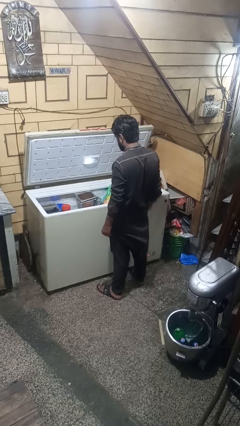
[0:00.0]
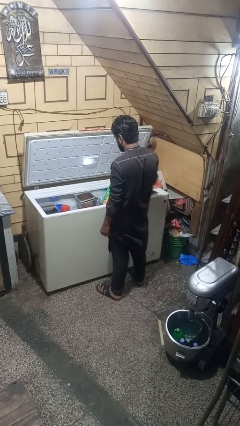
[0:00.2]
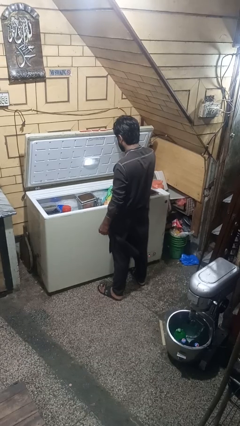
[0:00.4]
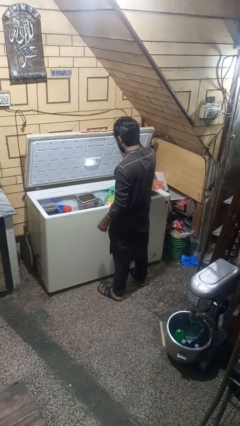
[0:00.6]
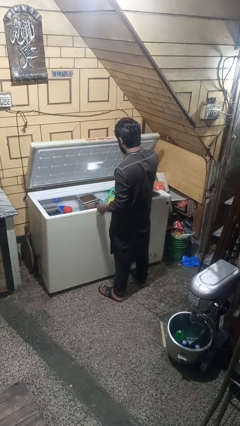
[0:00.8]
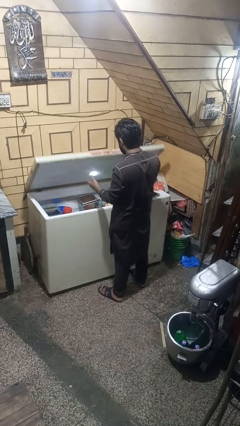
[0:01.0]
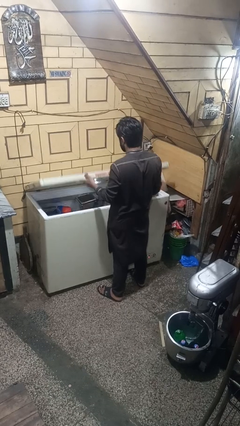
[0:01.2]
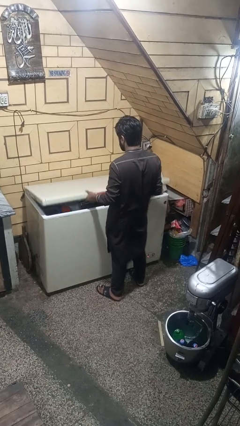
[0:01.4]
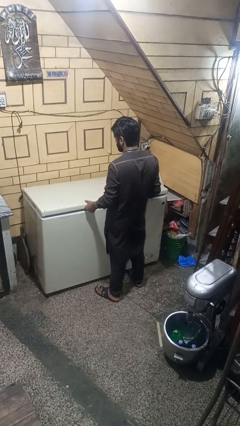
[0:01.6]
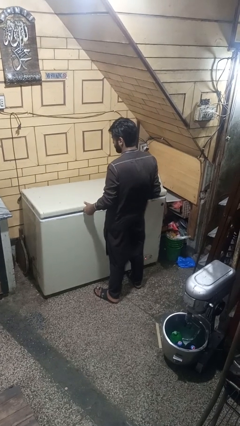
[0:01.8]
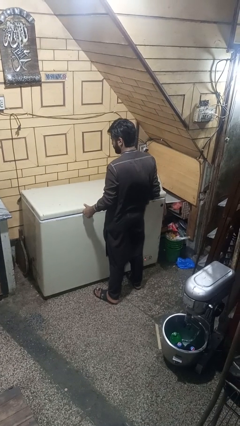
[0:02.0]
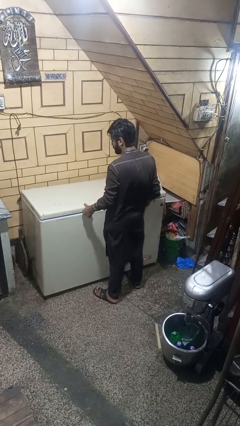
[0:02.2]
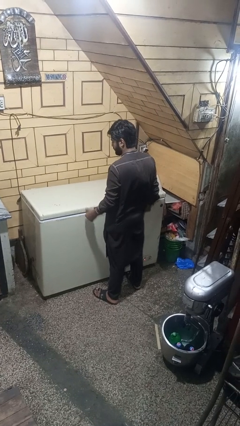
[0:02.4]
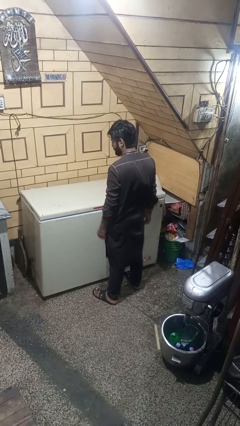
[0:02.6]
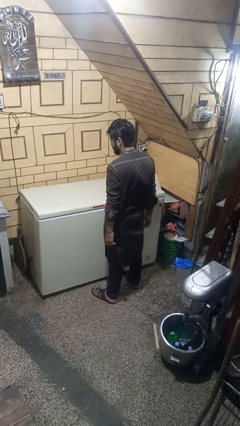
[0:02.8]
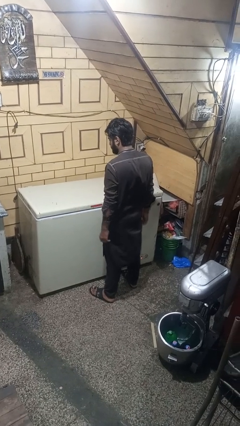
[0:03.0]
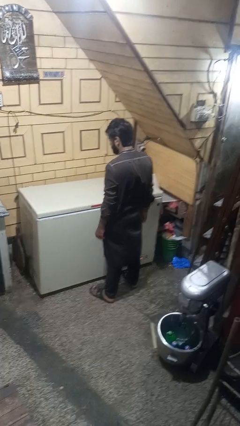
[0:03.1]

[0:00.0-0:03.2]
person closes refrigerator

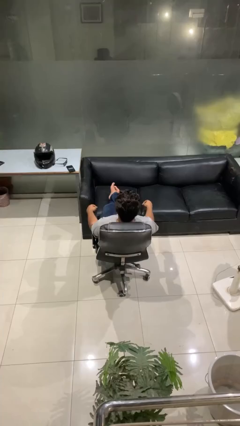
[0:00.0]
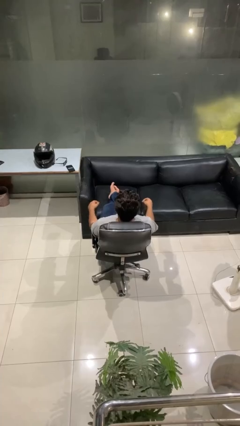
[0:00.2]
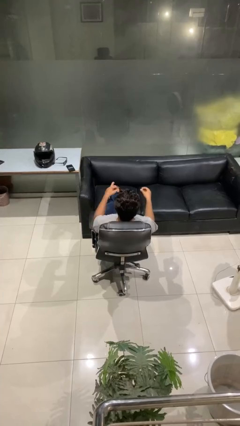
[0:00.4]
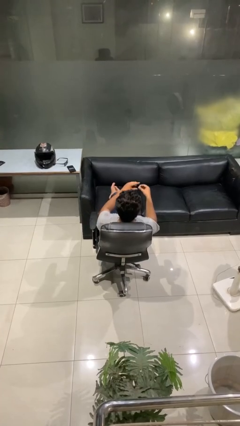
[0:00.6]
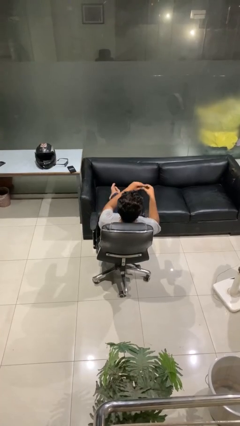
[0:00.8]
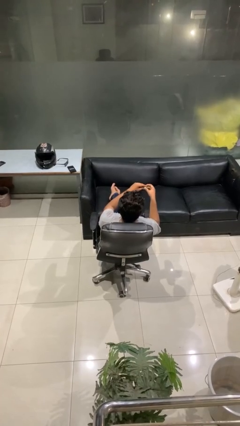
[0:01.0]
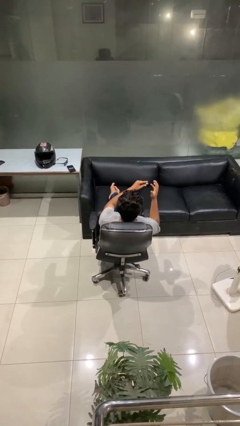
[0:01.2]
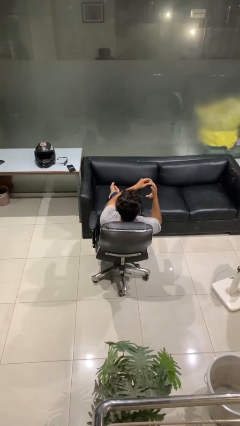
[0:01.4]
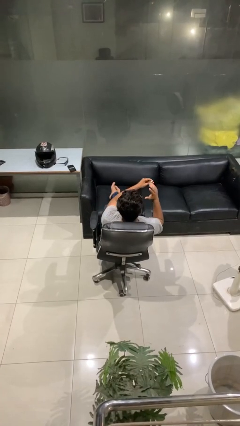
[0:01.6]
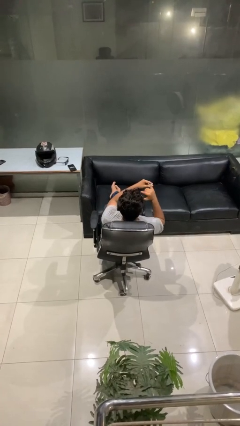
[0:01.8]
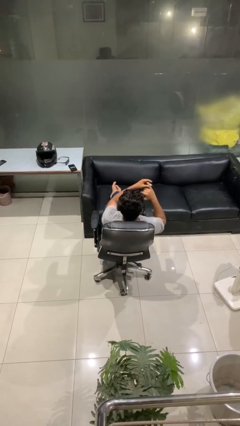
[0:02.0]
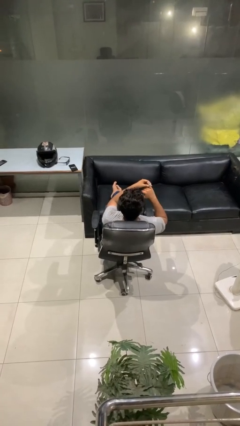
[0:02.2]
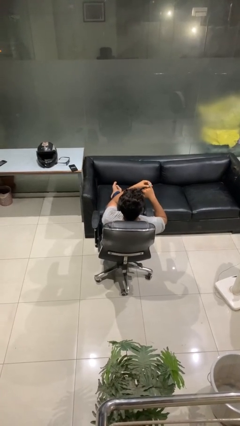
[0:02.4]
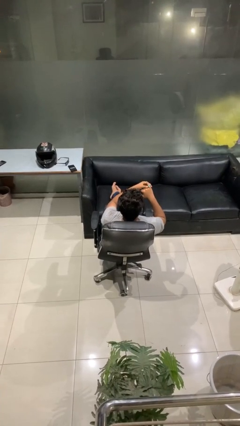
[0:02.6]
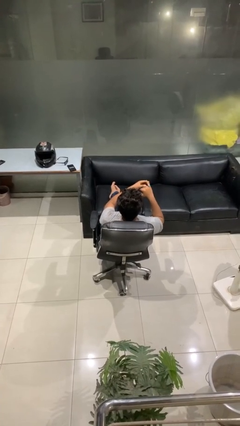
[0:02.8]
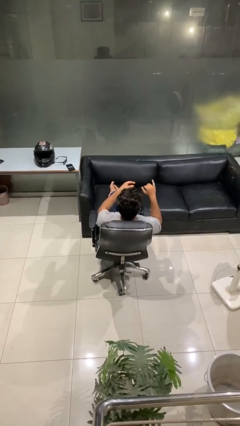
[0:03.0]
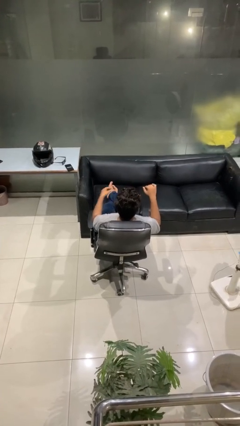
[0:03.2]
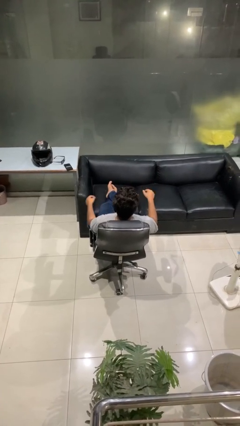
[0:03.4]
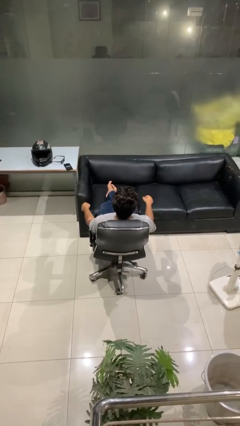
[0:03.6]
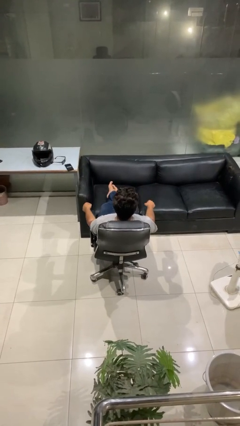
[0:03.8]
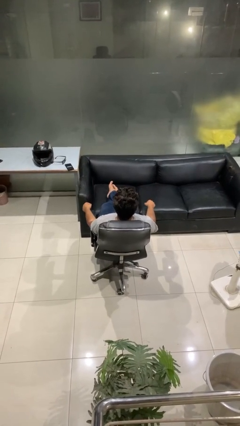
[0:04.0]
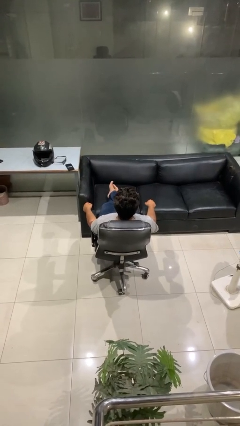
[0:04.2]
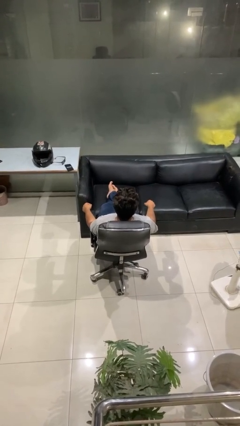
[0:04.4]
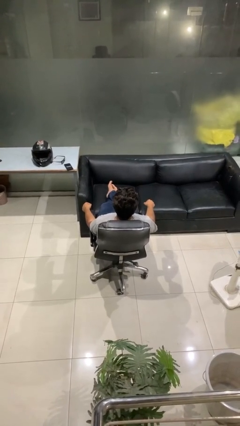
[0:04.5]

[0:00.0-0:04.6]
person puts on ring

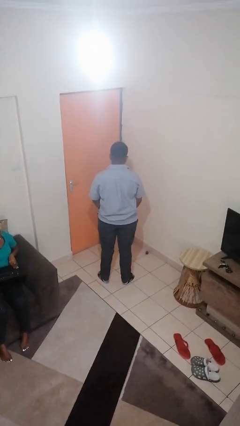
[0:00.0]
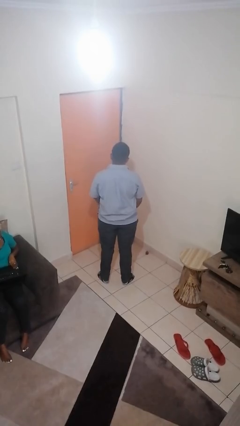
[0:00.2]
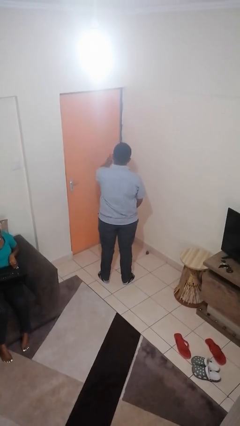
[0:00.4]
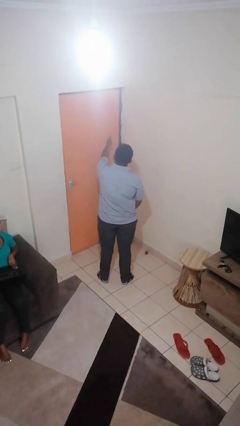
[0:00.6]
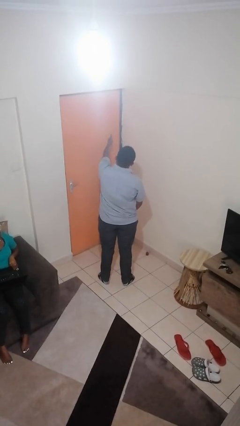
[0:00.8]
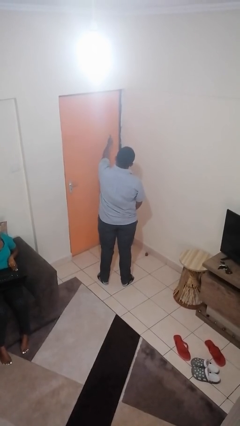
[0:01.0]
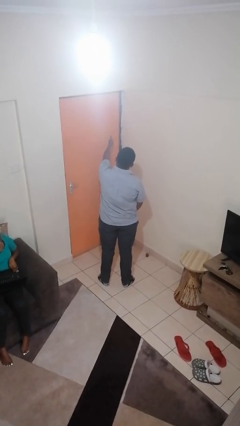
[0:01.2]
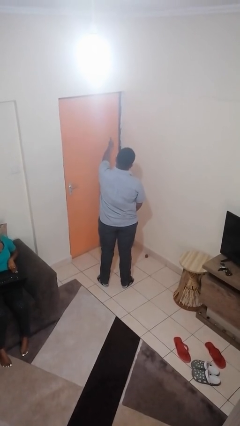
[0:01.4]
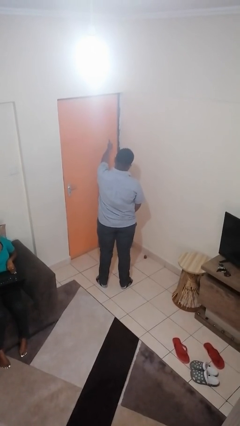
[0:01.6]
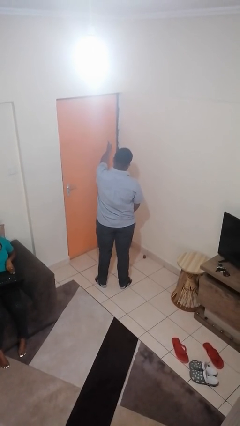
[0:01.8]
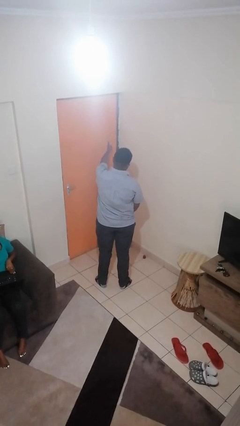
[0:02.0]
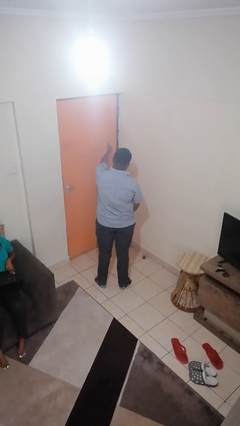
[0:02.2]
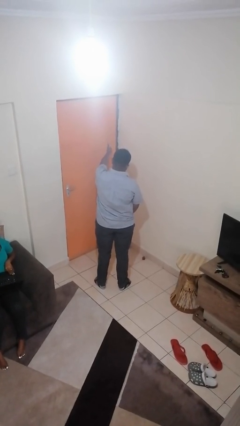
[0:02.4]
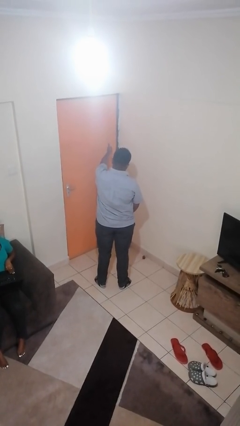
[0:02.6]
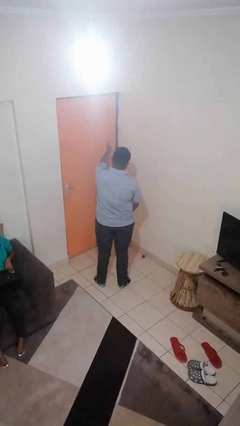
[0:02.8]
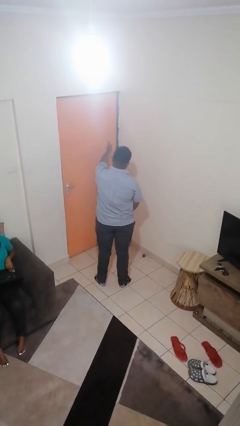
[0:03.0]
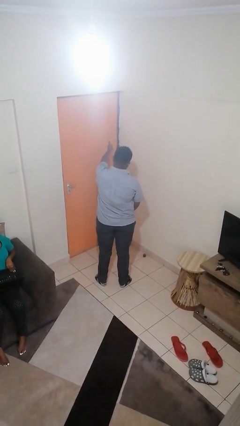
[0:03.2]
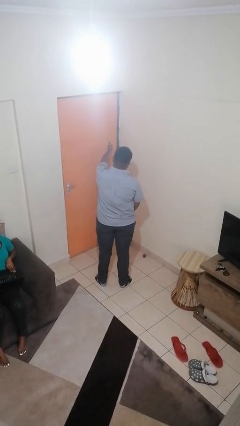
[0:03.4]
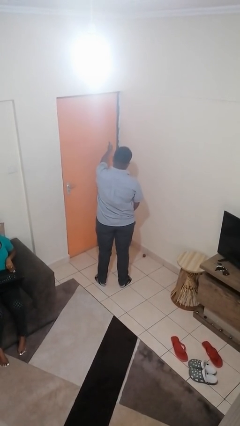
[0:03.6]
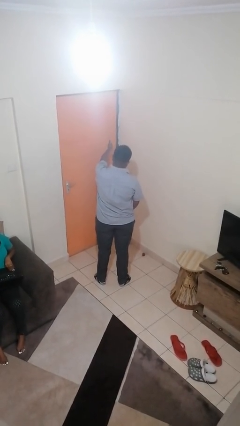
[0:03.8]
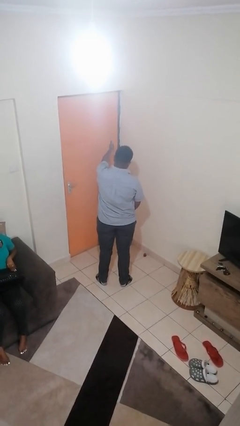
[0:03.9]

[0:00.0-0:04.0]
person gestures thumbs up

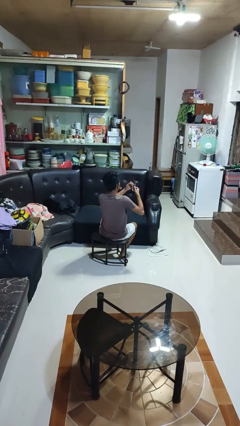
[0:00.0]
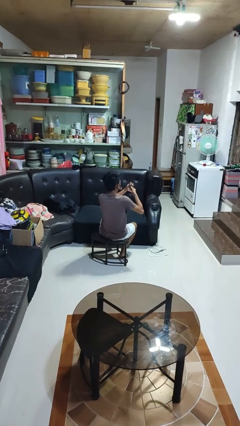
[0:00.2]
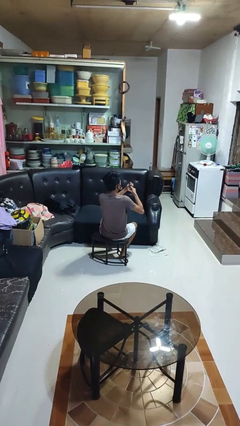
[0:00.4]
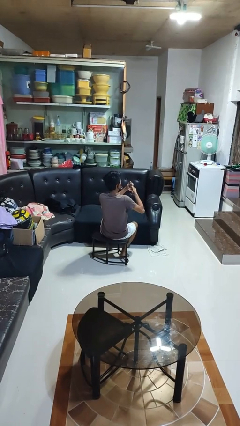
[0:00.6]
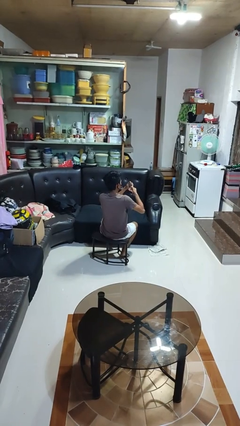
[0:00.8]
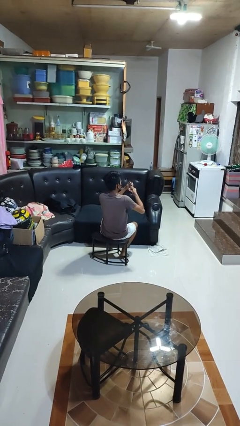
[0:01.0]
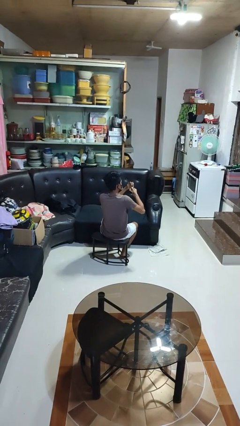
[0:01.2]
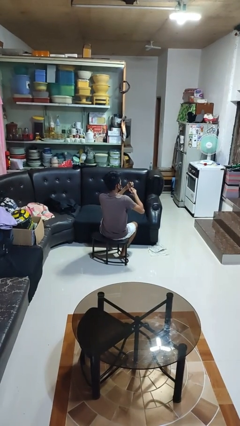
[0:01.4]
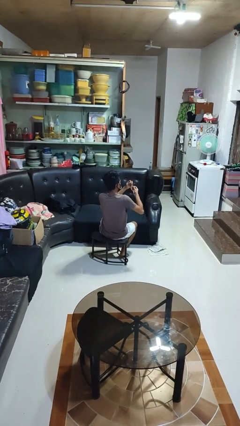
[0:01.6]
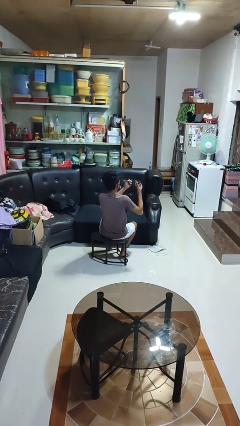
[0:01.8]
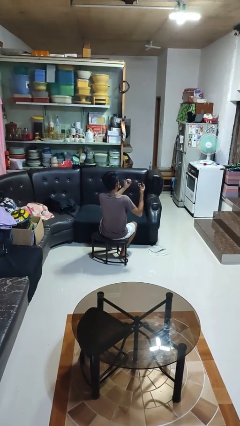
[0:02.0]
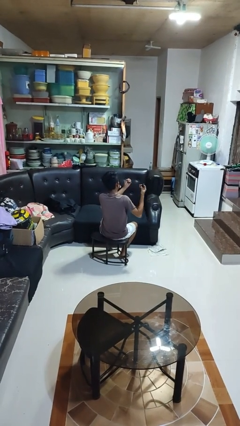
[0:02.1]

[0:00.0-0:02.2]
person clips fingernails

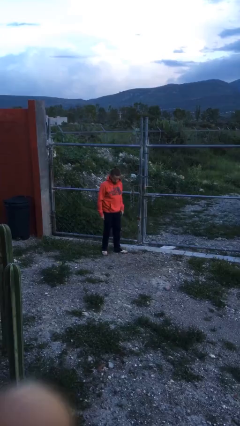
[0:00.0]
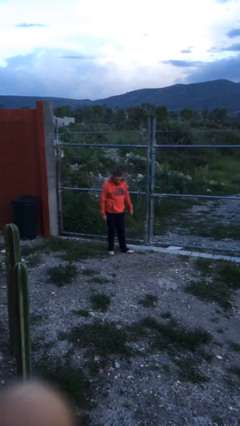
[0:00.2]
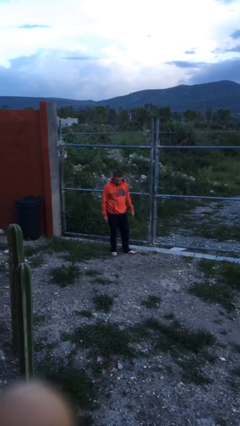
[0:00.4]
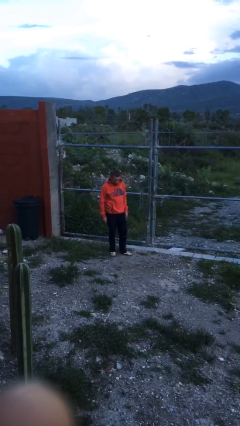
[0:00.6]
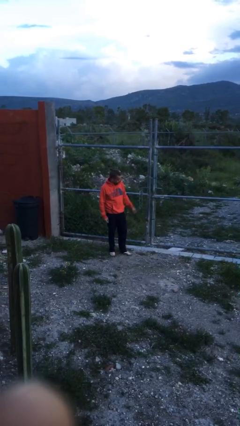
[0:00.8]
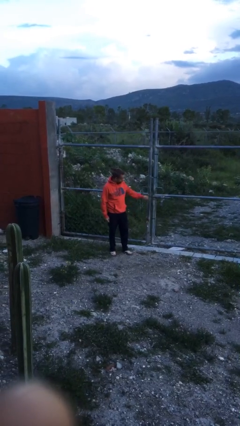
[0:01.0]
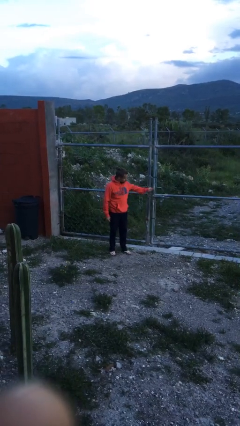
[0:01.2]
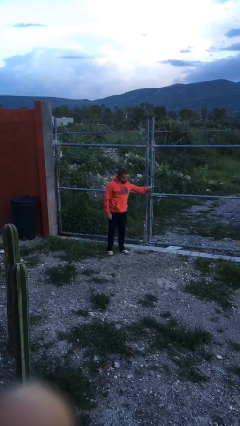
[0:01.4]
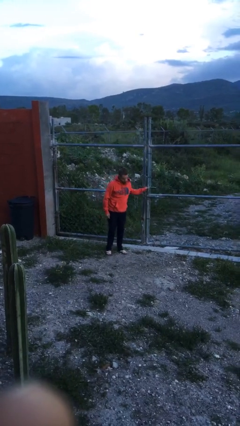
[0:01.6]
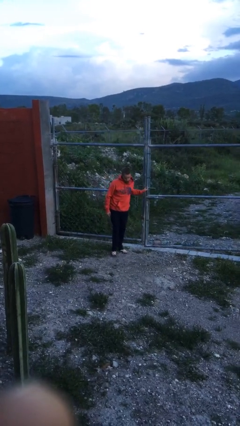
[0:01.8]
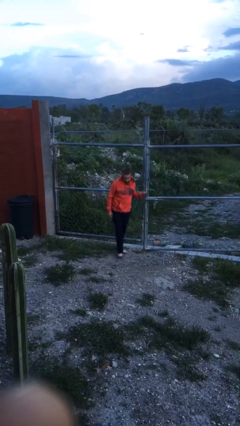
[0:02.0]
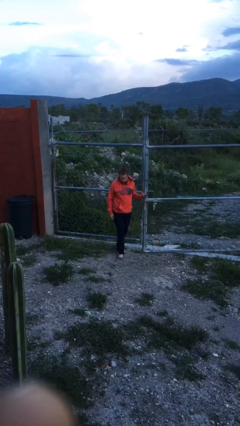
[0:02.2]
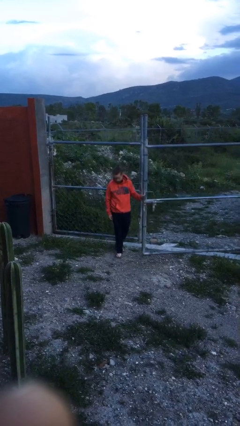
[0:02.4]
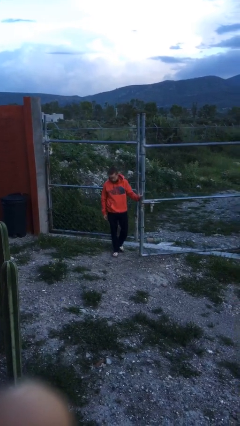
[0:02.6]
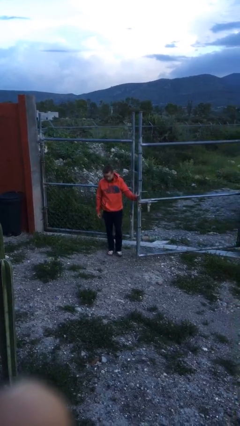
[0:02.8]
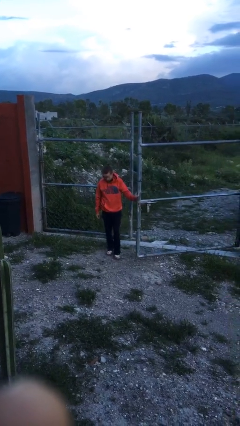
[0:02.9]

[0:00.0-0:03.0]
person opens gate

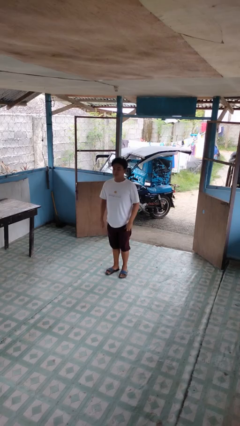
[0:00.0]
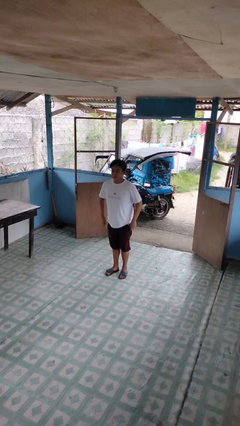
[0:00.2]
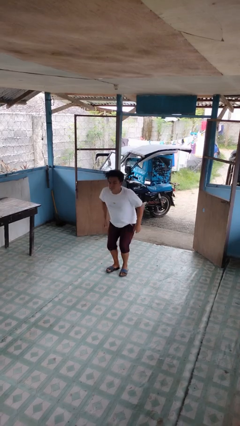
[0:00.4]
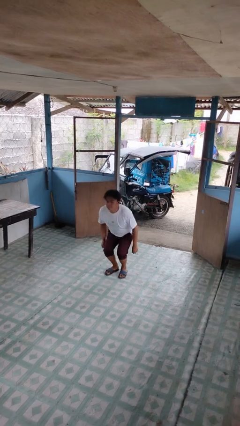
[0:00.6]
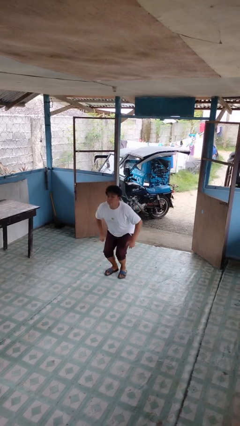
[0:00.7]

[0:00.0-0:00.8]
person jumps
